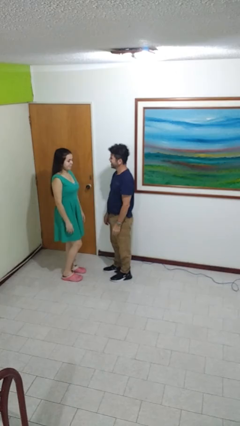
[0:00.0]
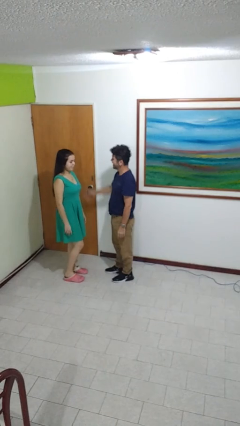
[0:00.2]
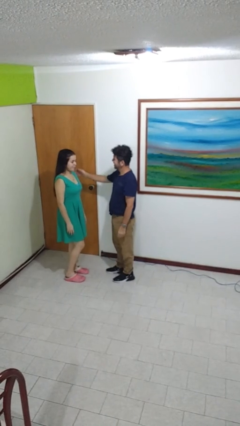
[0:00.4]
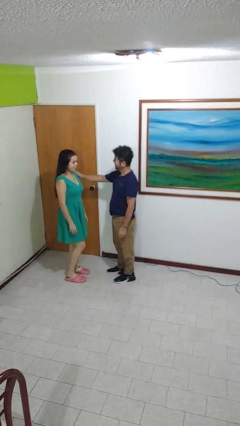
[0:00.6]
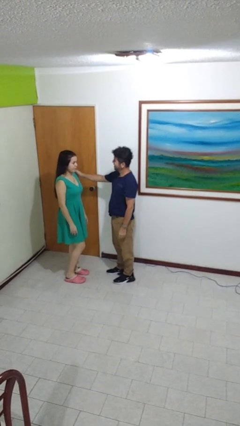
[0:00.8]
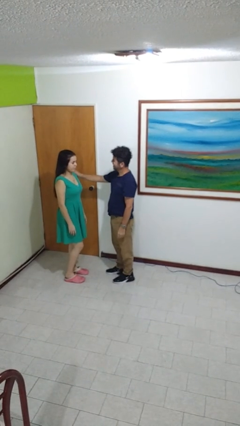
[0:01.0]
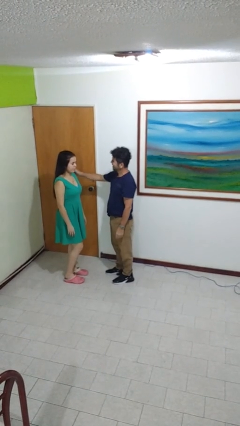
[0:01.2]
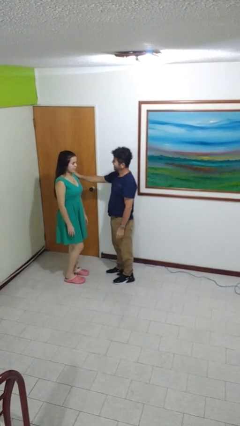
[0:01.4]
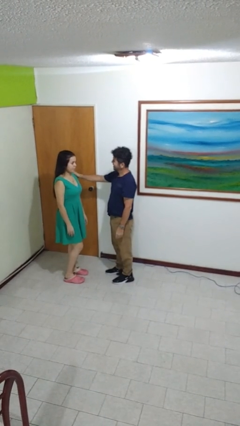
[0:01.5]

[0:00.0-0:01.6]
person pounds shoulders of person

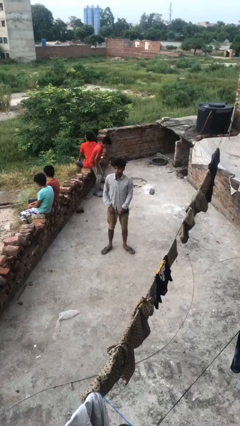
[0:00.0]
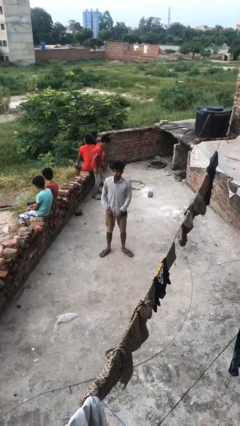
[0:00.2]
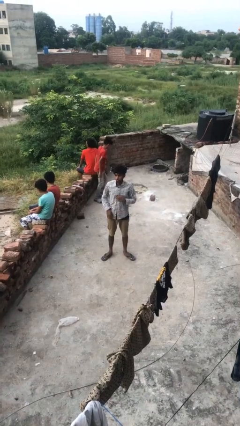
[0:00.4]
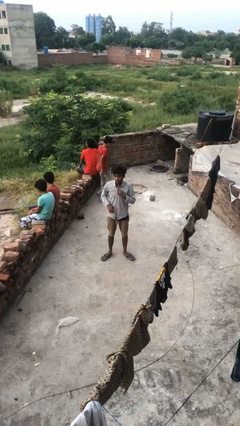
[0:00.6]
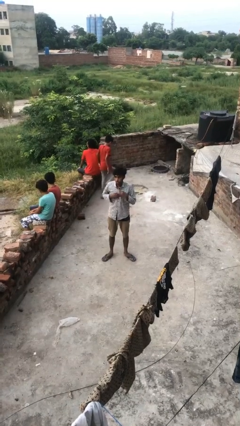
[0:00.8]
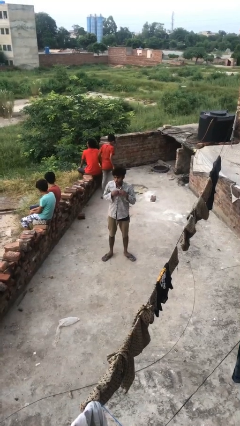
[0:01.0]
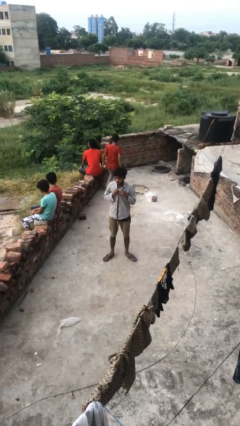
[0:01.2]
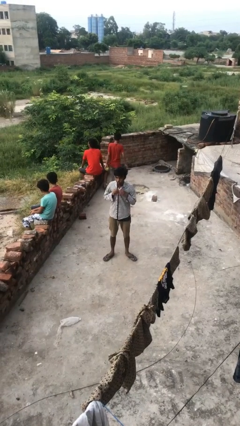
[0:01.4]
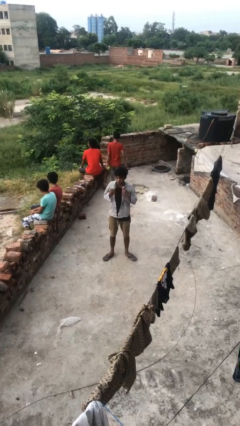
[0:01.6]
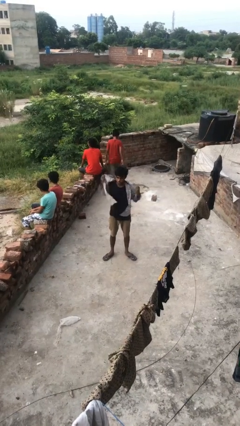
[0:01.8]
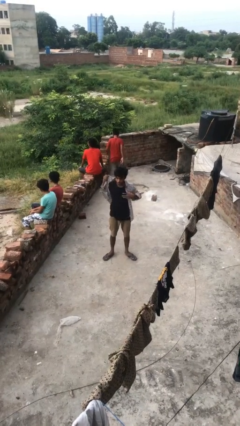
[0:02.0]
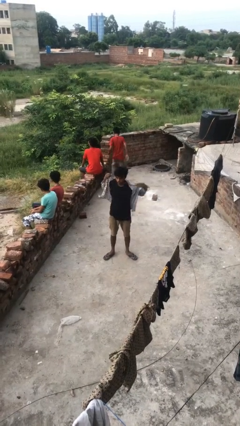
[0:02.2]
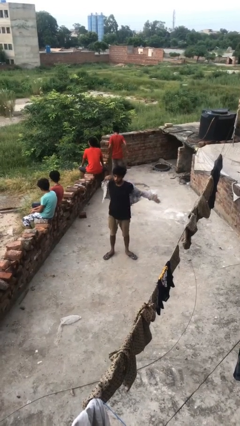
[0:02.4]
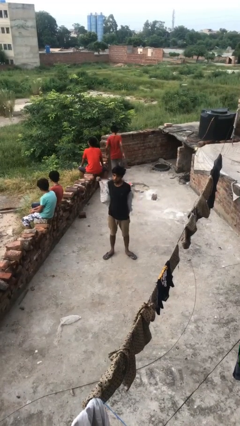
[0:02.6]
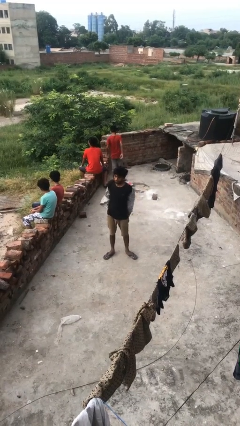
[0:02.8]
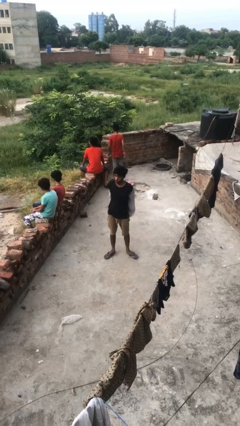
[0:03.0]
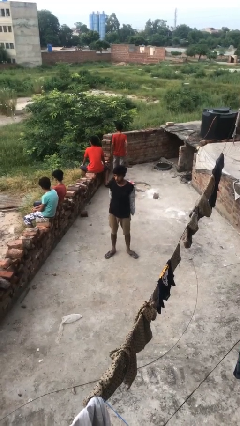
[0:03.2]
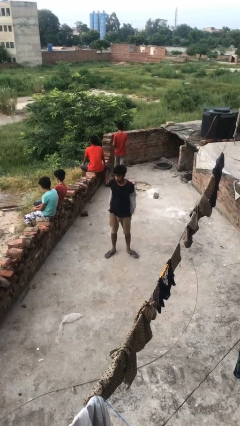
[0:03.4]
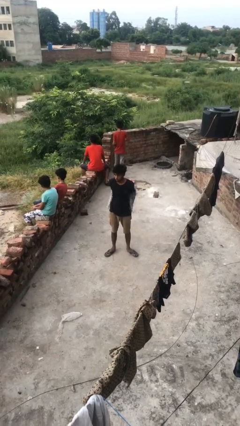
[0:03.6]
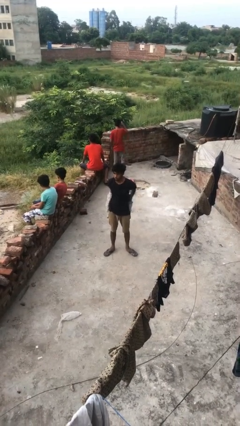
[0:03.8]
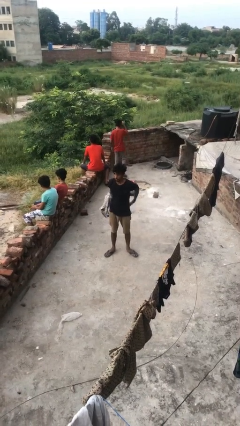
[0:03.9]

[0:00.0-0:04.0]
person takes off shirt

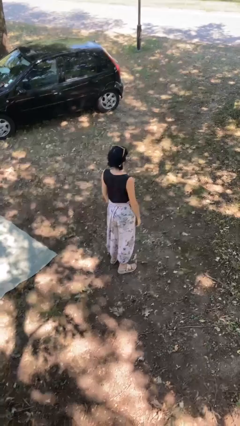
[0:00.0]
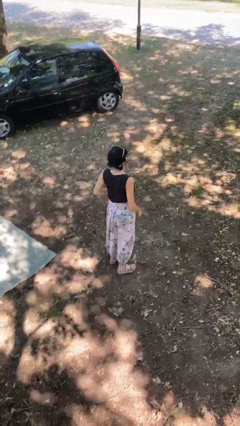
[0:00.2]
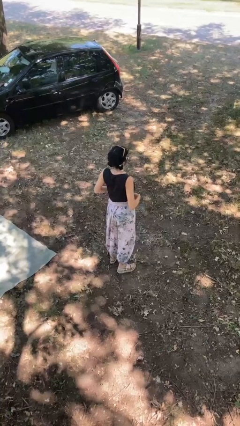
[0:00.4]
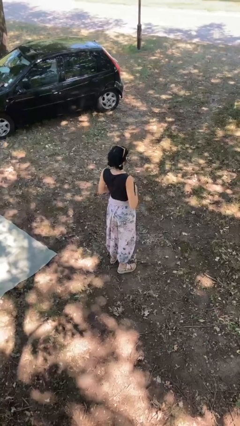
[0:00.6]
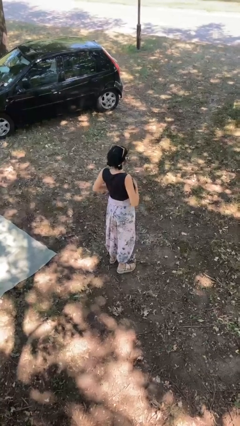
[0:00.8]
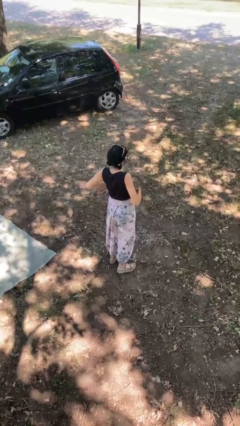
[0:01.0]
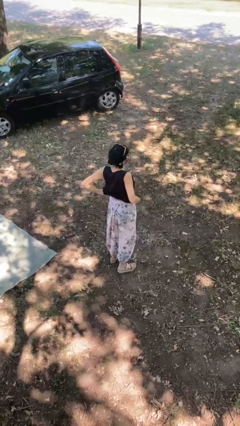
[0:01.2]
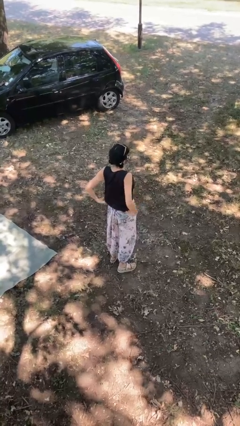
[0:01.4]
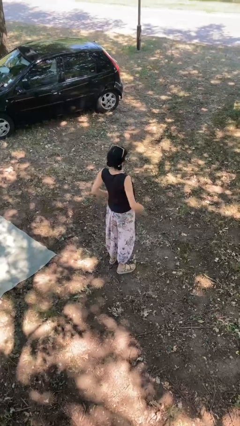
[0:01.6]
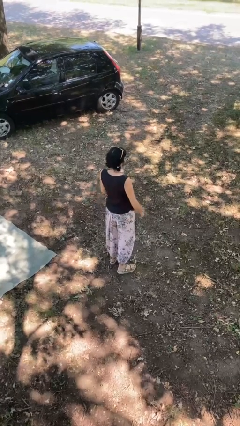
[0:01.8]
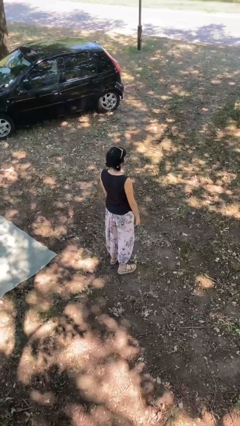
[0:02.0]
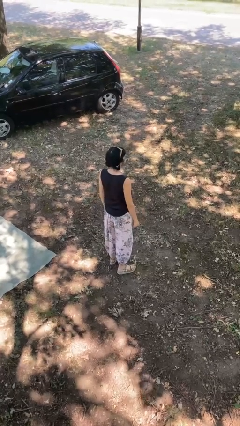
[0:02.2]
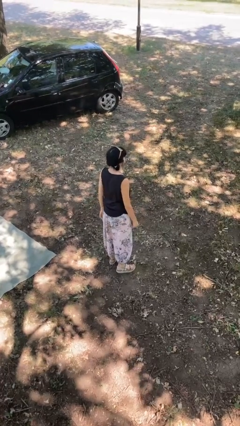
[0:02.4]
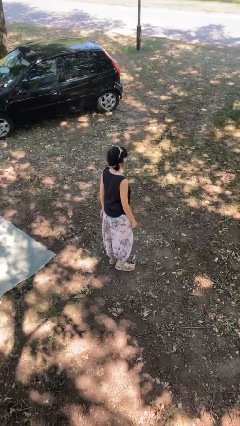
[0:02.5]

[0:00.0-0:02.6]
person untucks shirt

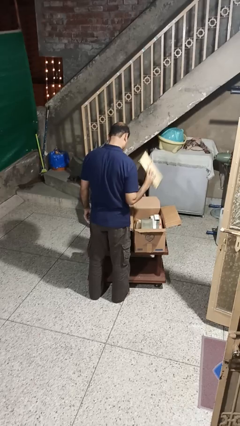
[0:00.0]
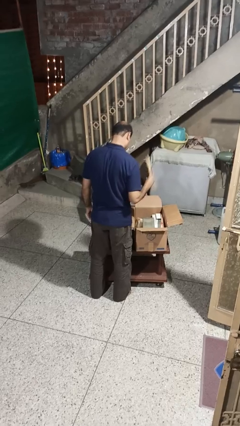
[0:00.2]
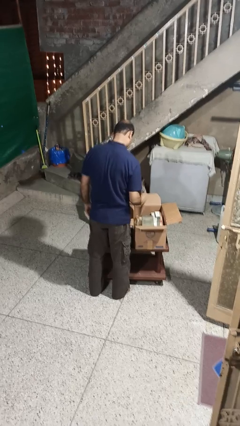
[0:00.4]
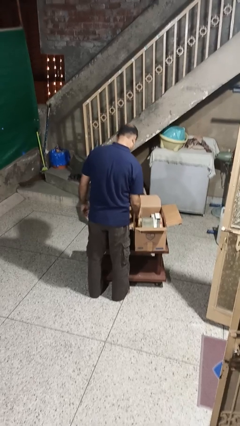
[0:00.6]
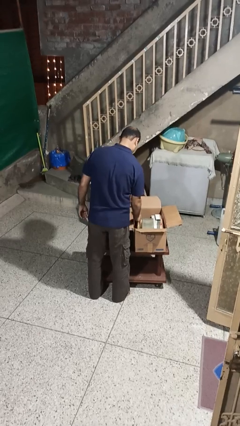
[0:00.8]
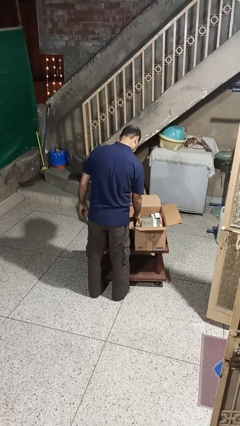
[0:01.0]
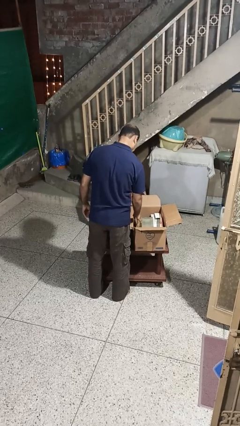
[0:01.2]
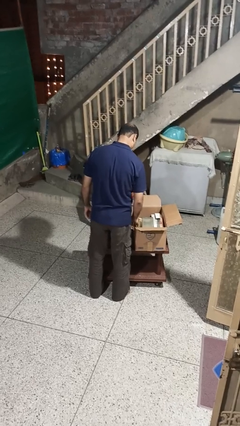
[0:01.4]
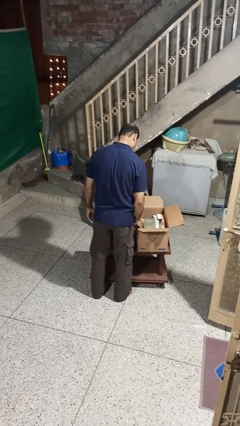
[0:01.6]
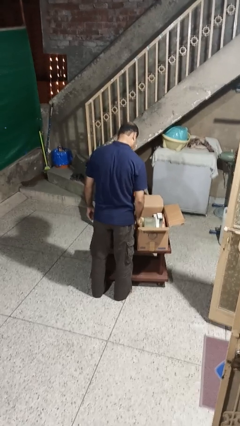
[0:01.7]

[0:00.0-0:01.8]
person puts object into box

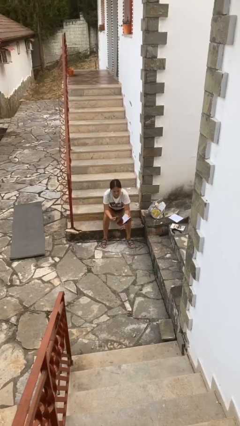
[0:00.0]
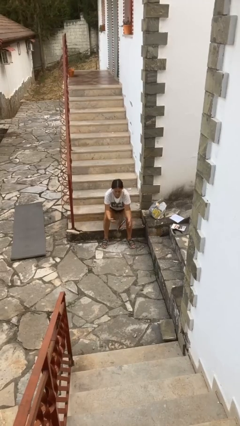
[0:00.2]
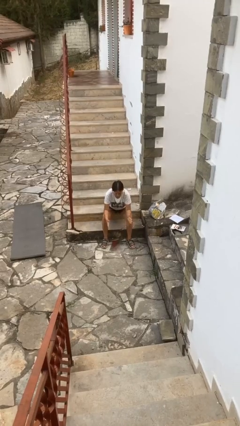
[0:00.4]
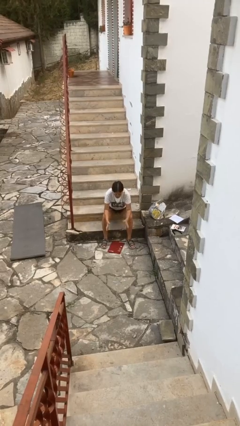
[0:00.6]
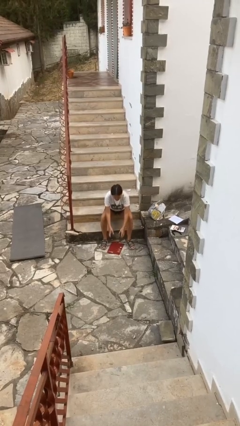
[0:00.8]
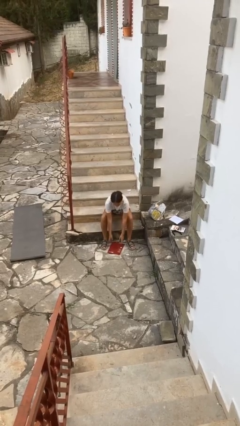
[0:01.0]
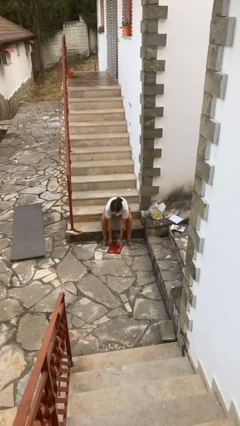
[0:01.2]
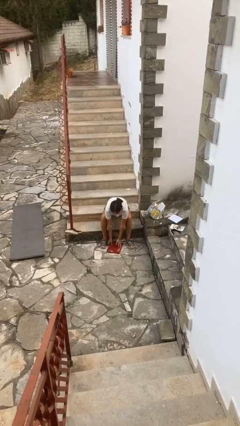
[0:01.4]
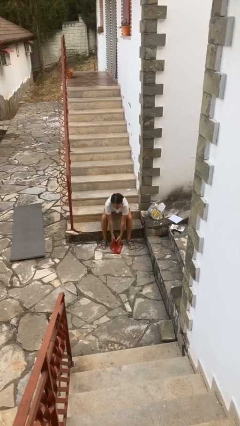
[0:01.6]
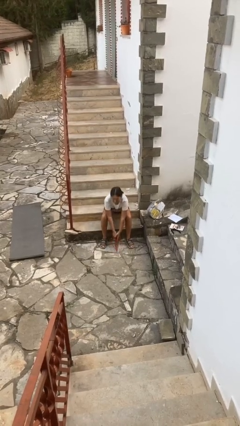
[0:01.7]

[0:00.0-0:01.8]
person drops object

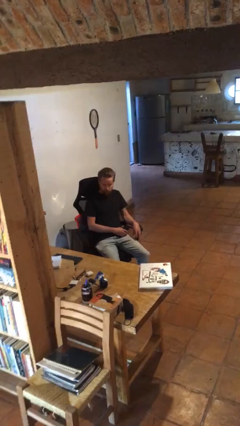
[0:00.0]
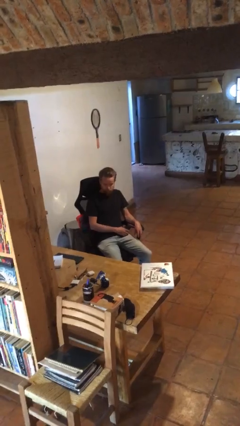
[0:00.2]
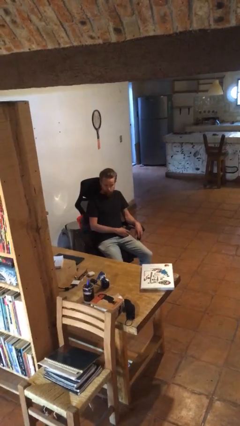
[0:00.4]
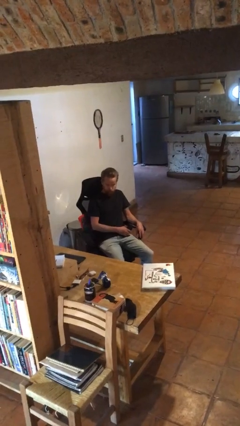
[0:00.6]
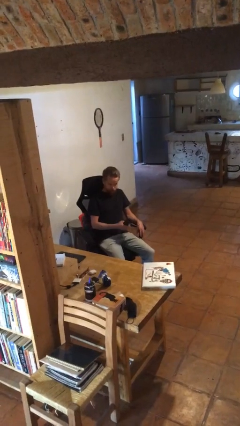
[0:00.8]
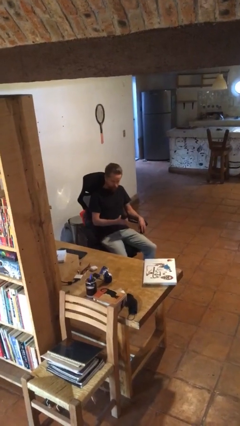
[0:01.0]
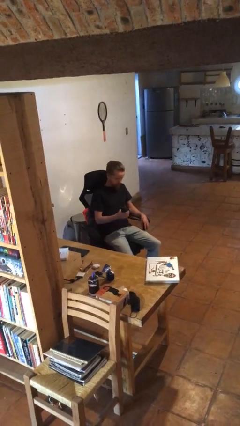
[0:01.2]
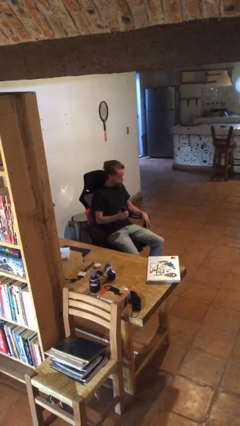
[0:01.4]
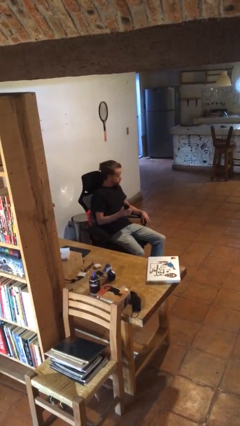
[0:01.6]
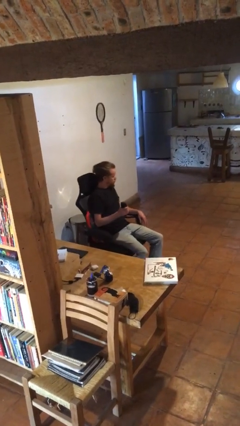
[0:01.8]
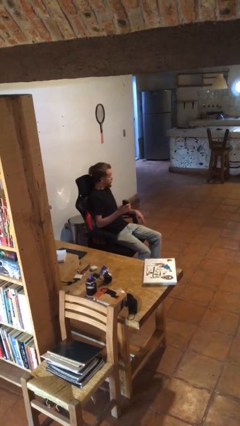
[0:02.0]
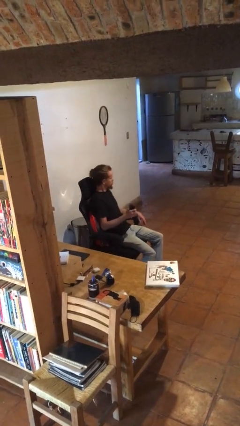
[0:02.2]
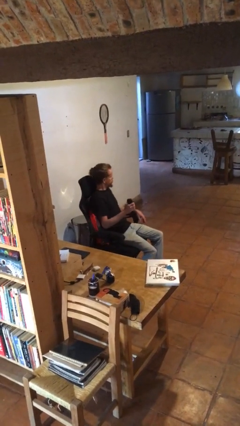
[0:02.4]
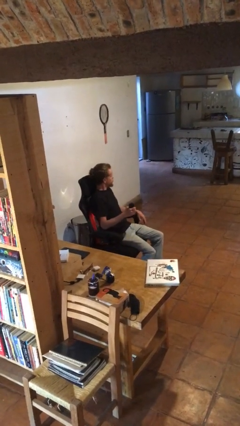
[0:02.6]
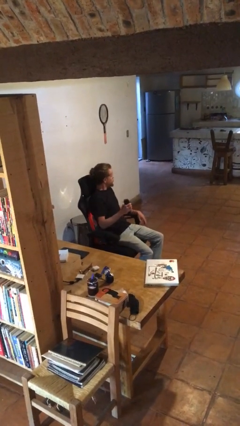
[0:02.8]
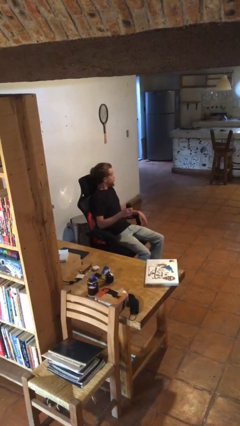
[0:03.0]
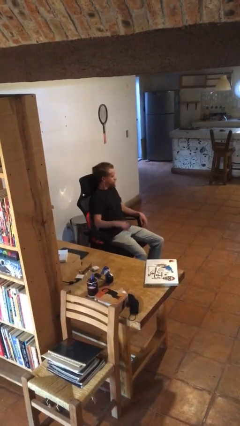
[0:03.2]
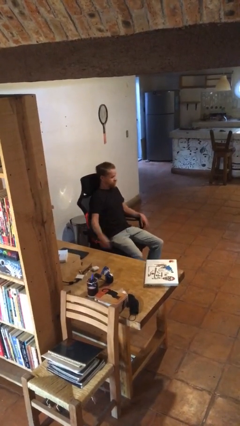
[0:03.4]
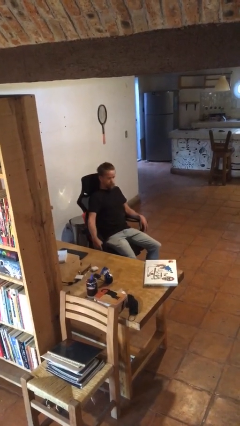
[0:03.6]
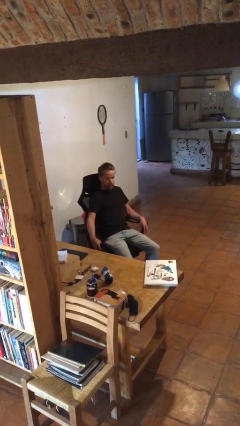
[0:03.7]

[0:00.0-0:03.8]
person squeezes object

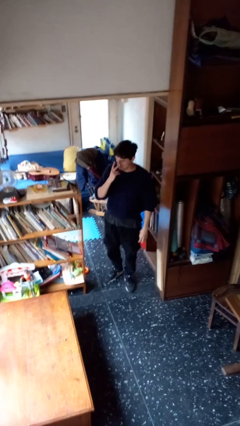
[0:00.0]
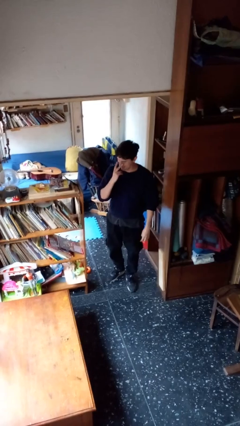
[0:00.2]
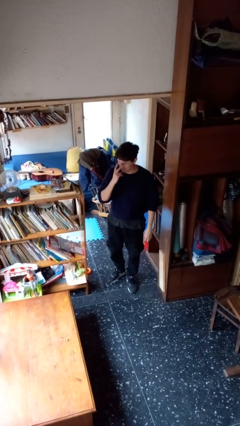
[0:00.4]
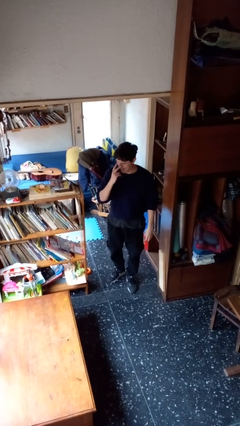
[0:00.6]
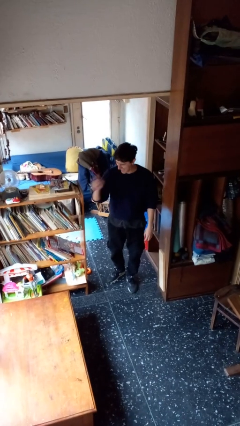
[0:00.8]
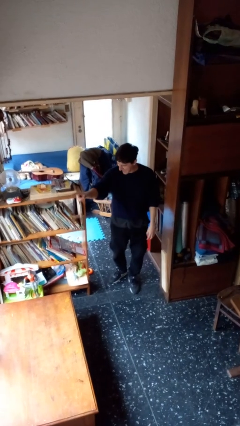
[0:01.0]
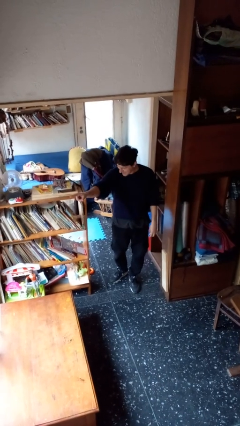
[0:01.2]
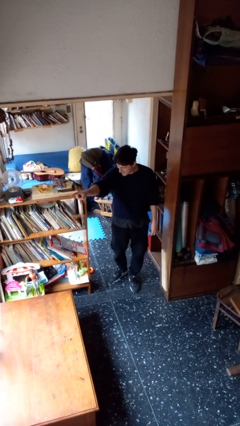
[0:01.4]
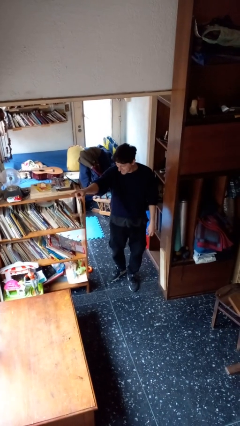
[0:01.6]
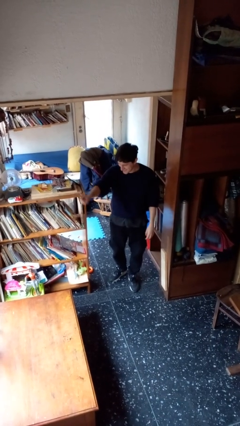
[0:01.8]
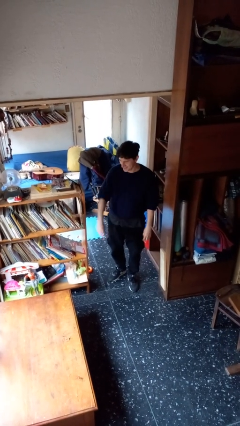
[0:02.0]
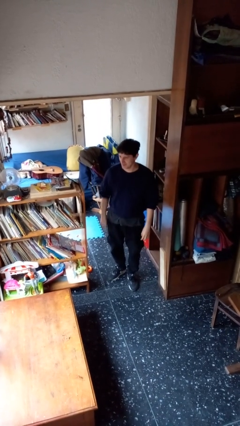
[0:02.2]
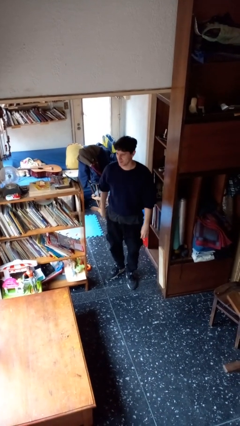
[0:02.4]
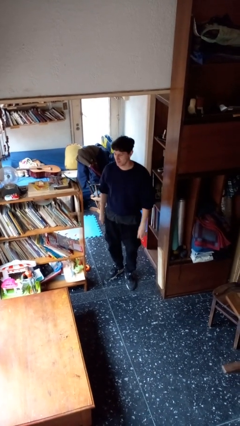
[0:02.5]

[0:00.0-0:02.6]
person gestures watch closely
